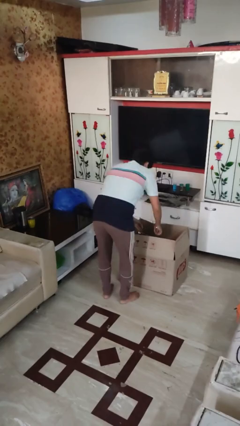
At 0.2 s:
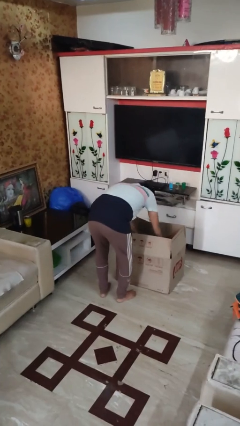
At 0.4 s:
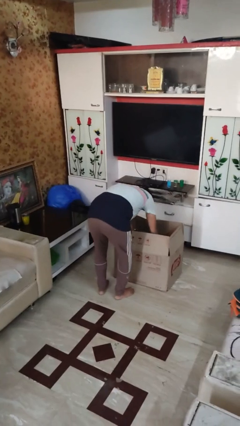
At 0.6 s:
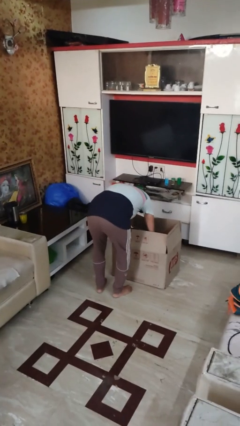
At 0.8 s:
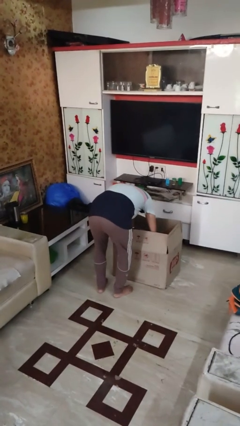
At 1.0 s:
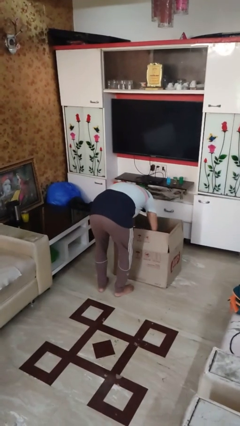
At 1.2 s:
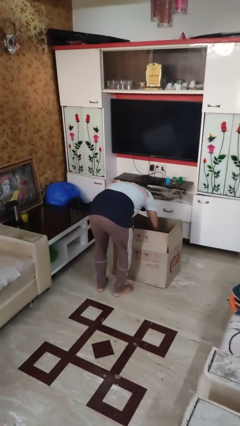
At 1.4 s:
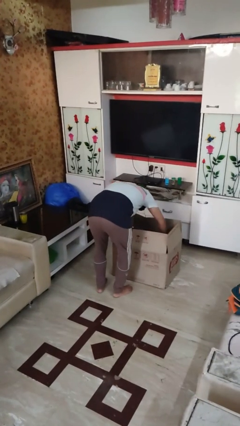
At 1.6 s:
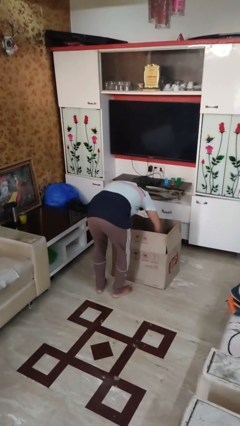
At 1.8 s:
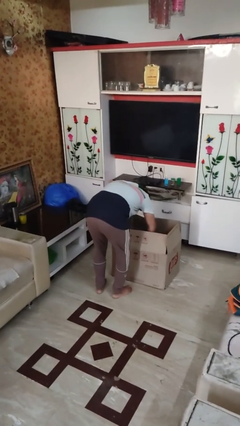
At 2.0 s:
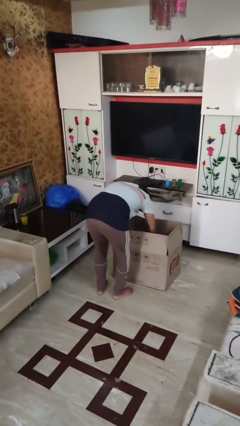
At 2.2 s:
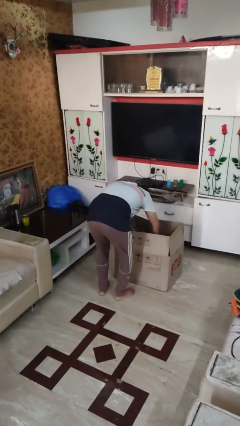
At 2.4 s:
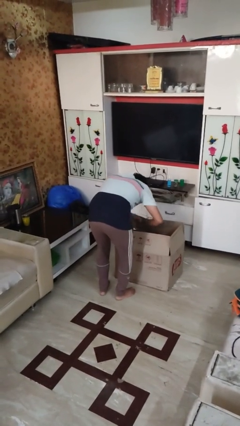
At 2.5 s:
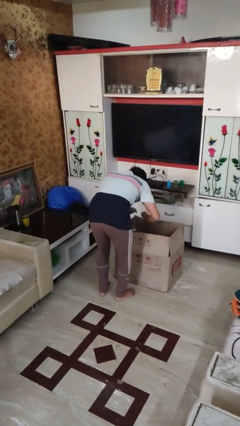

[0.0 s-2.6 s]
person searches in box

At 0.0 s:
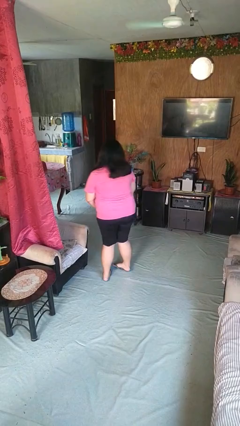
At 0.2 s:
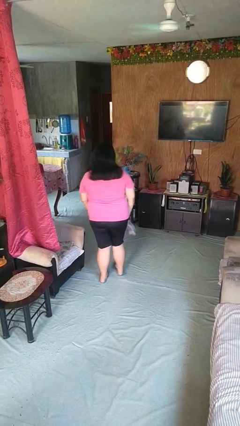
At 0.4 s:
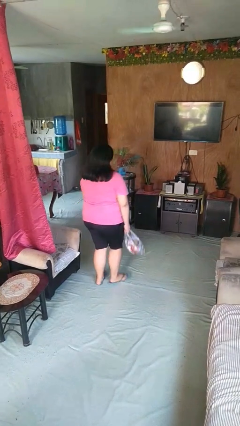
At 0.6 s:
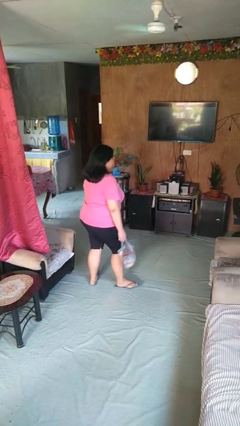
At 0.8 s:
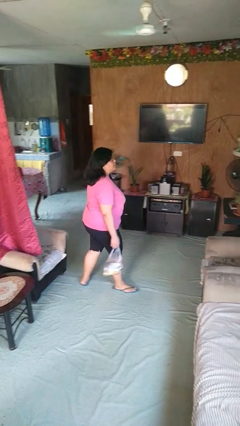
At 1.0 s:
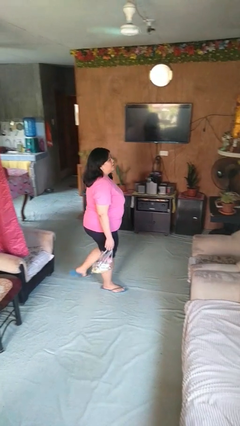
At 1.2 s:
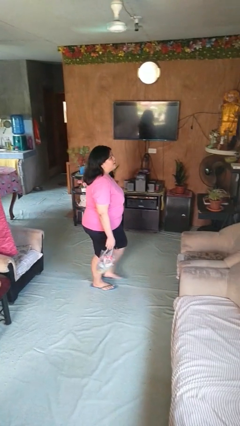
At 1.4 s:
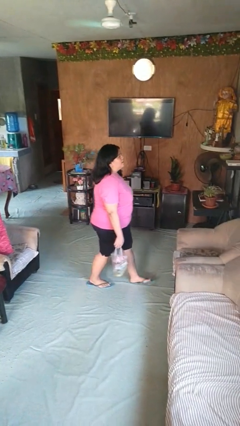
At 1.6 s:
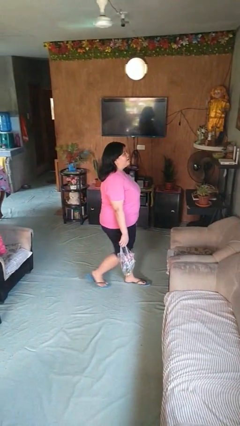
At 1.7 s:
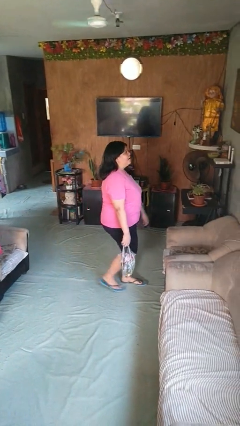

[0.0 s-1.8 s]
person carries groceries

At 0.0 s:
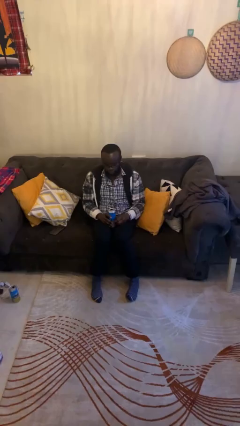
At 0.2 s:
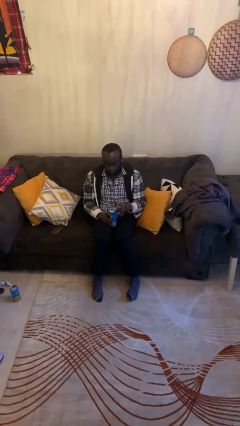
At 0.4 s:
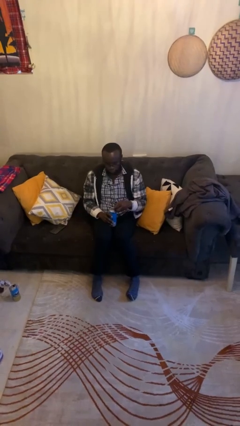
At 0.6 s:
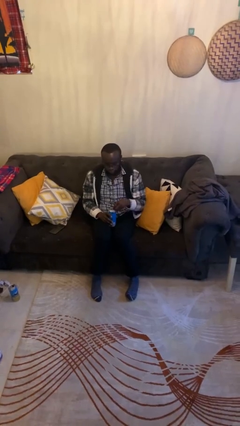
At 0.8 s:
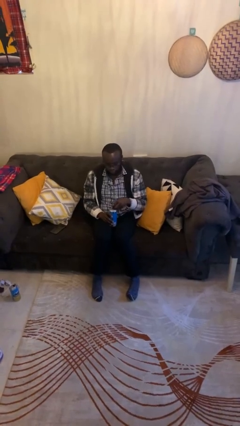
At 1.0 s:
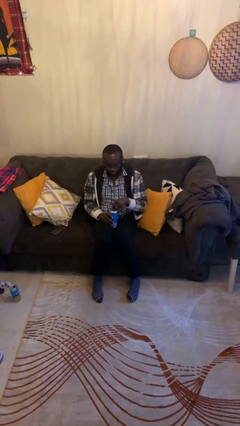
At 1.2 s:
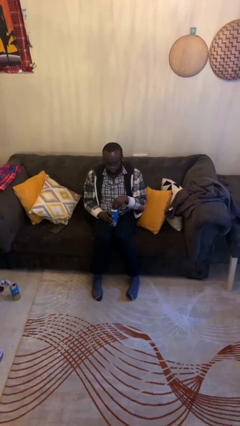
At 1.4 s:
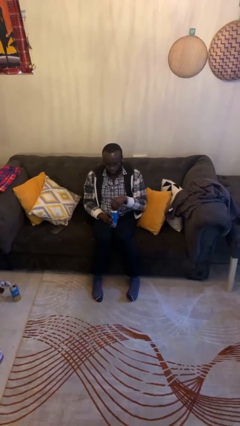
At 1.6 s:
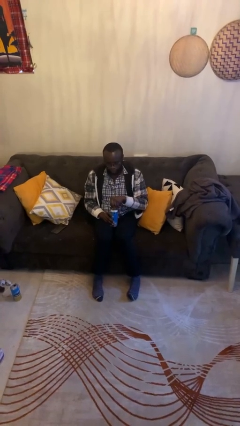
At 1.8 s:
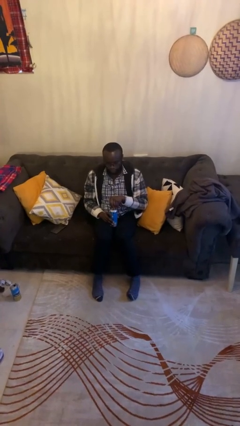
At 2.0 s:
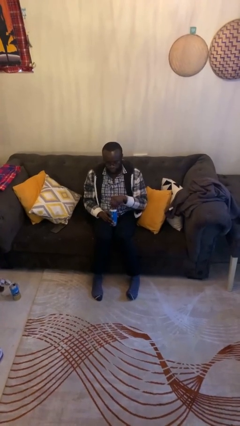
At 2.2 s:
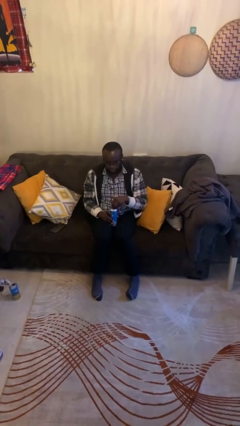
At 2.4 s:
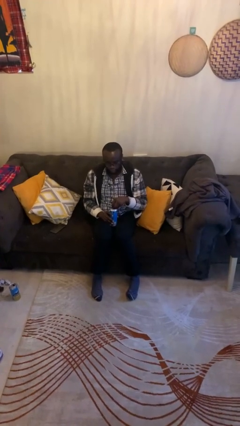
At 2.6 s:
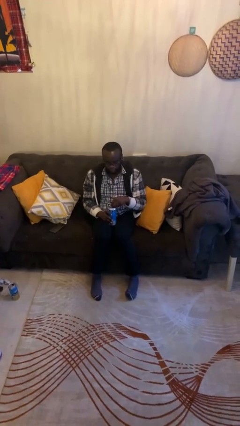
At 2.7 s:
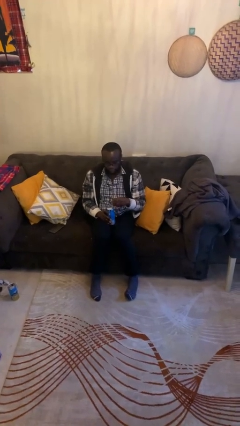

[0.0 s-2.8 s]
person opens beverage can

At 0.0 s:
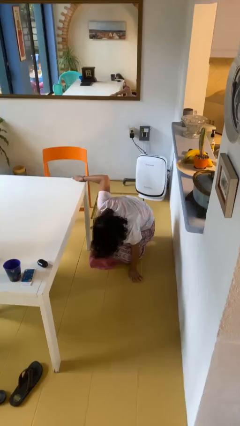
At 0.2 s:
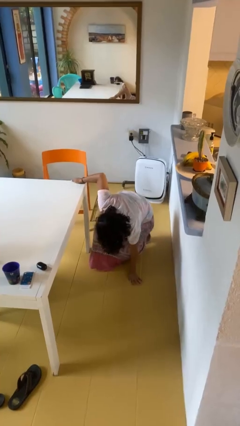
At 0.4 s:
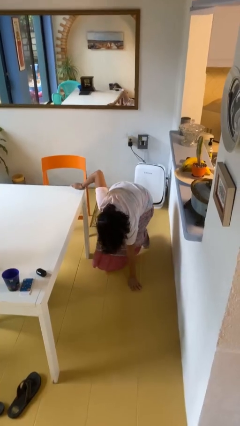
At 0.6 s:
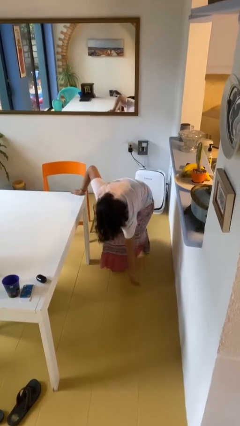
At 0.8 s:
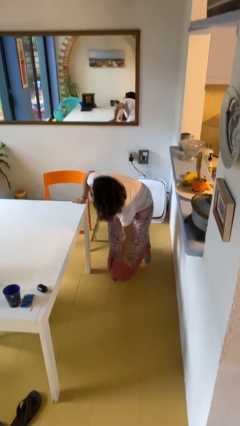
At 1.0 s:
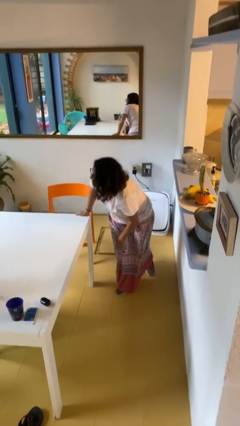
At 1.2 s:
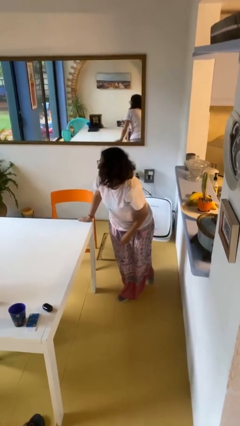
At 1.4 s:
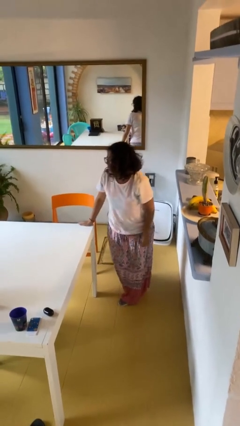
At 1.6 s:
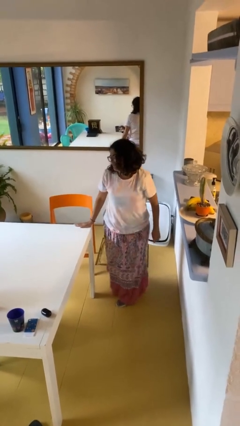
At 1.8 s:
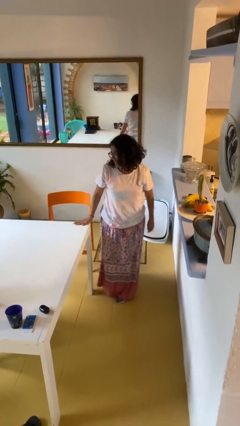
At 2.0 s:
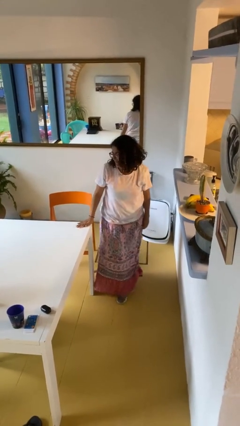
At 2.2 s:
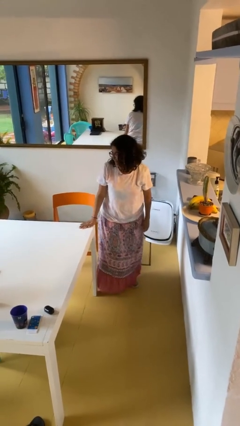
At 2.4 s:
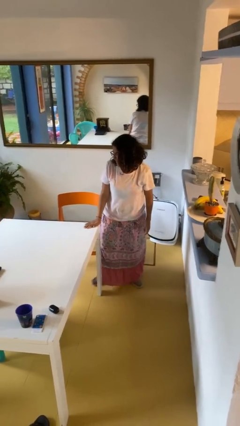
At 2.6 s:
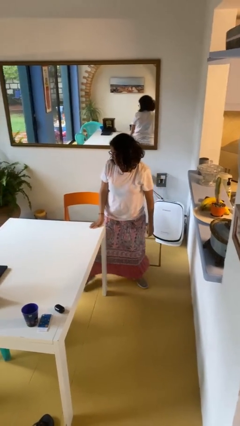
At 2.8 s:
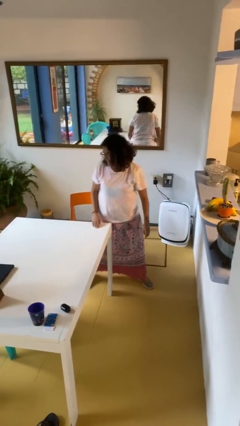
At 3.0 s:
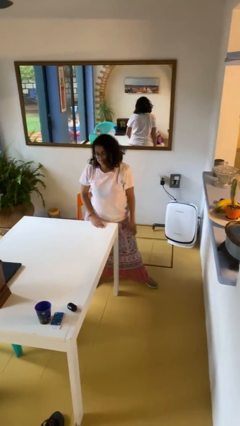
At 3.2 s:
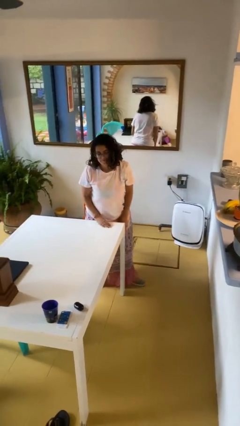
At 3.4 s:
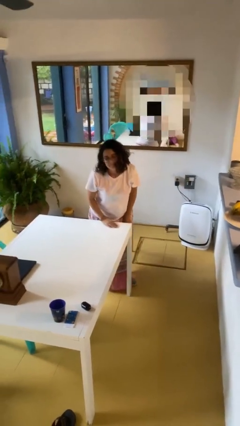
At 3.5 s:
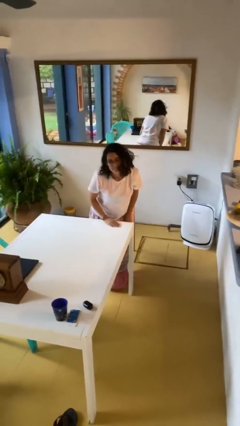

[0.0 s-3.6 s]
person stands up from floor

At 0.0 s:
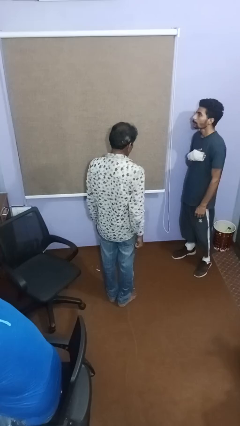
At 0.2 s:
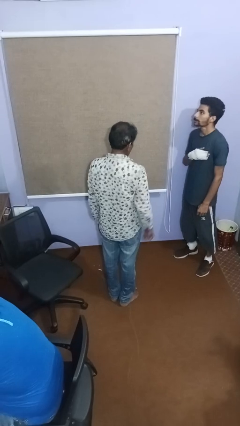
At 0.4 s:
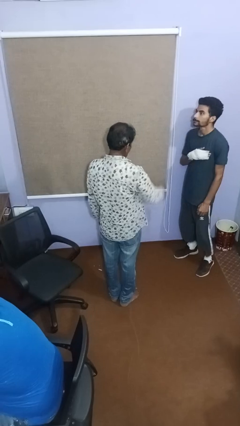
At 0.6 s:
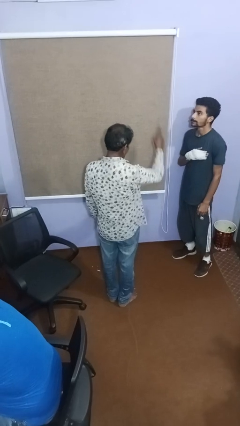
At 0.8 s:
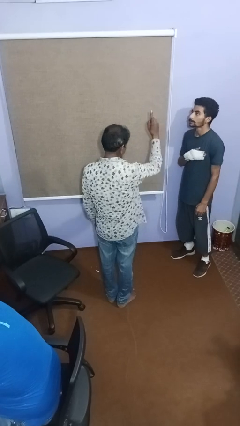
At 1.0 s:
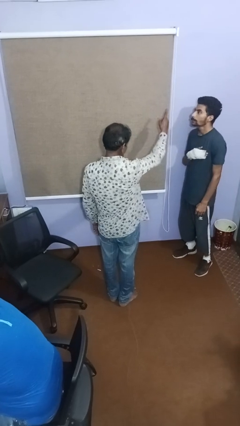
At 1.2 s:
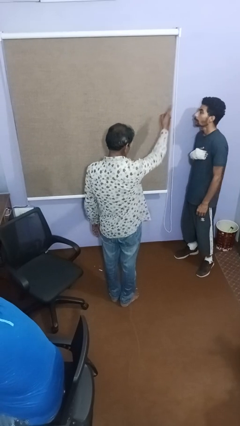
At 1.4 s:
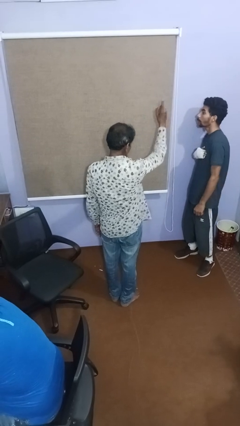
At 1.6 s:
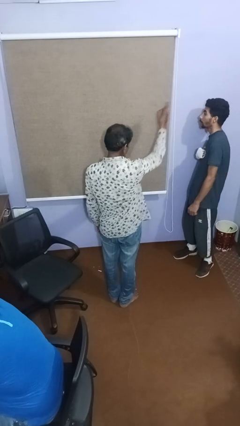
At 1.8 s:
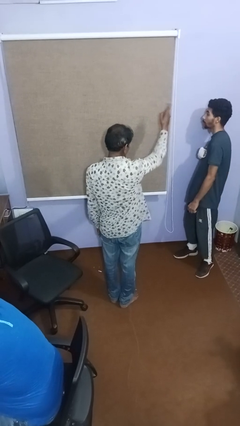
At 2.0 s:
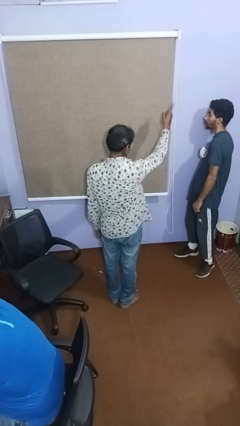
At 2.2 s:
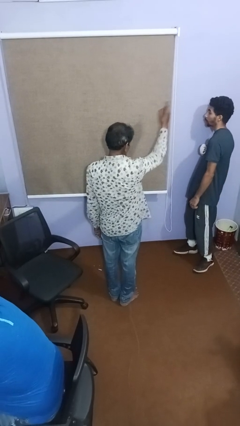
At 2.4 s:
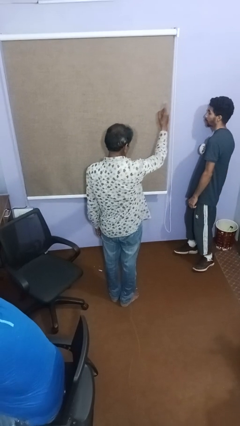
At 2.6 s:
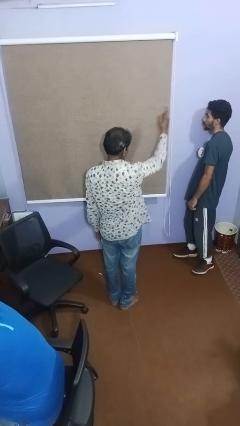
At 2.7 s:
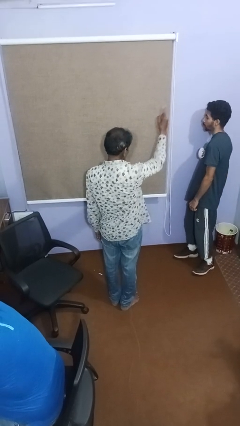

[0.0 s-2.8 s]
person points at person

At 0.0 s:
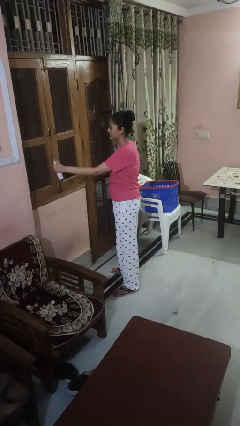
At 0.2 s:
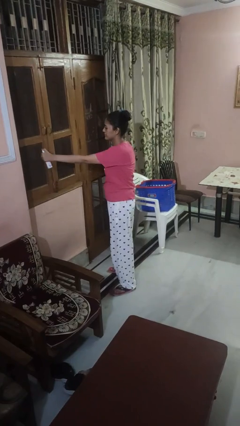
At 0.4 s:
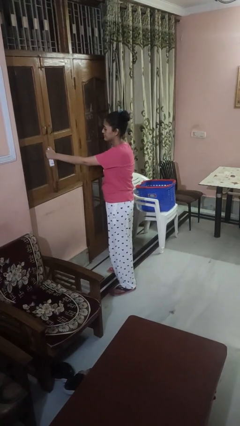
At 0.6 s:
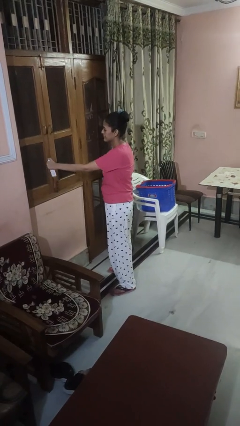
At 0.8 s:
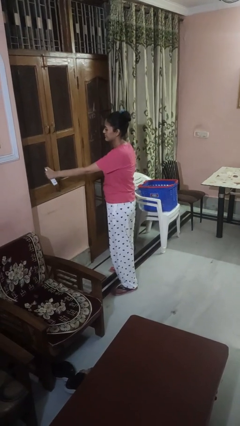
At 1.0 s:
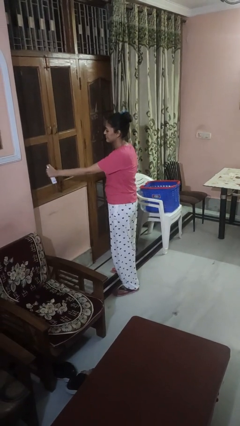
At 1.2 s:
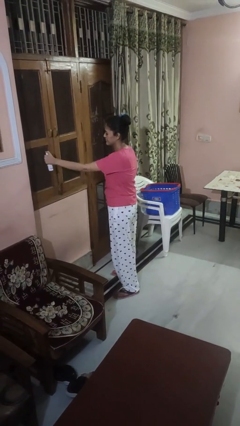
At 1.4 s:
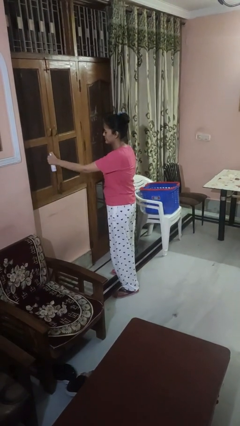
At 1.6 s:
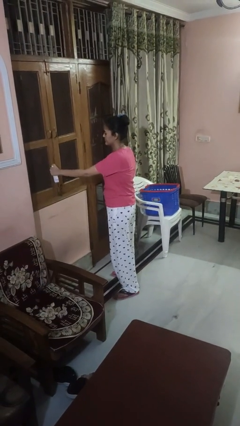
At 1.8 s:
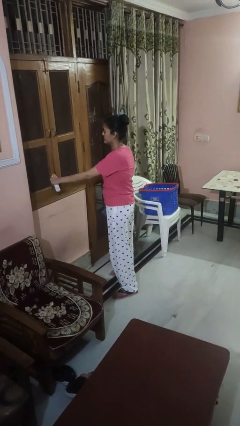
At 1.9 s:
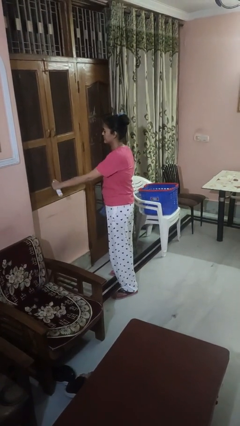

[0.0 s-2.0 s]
person sprays from bottle

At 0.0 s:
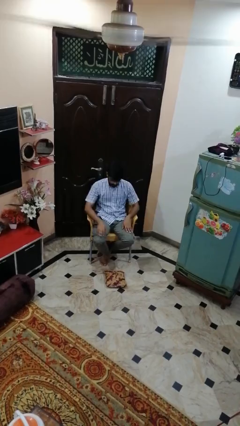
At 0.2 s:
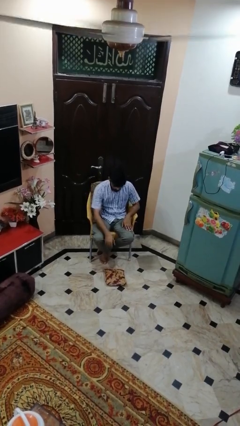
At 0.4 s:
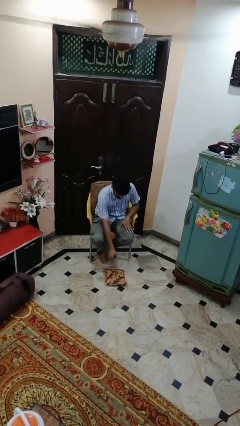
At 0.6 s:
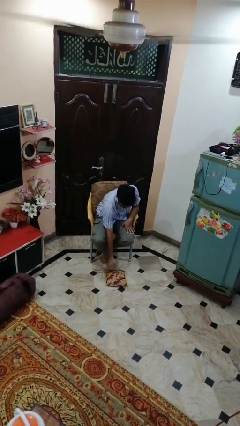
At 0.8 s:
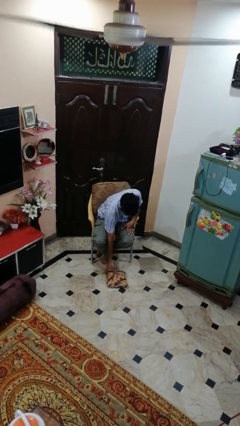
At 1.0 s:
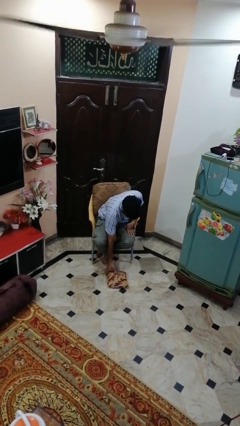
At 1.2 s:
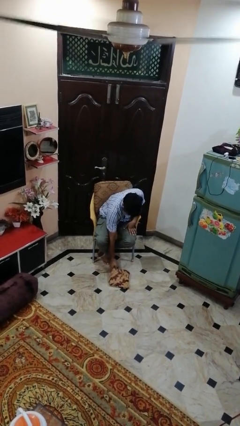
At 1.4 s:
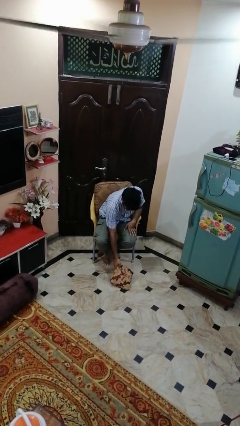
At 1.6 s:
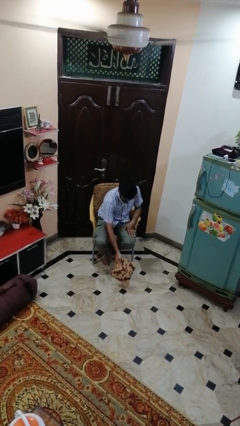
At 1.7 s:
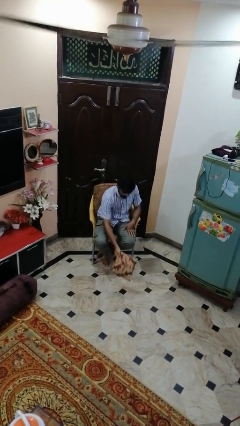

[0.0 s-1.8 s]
person picks up object from floor
